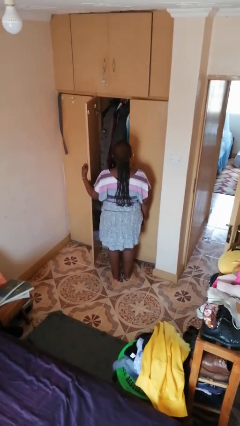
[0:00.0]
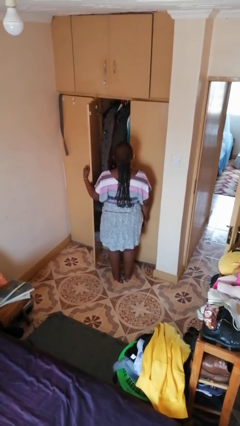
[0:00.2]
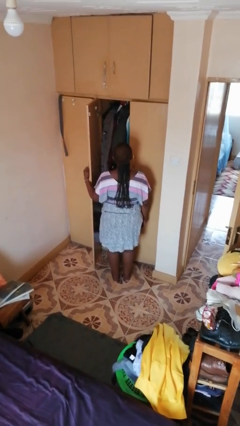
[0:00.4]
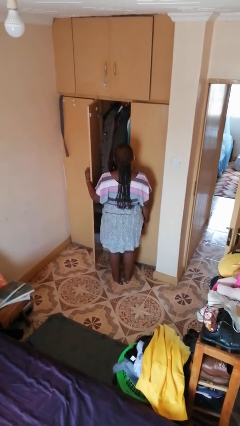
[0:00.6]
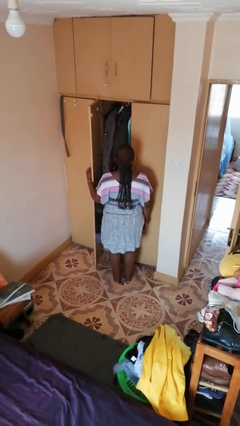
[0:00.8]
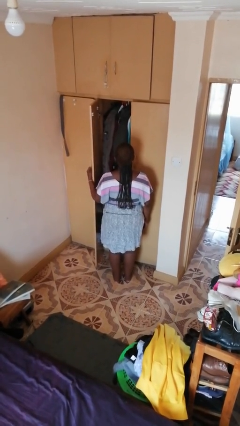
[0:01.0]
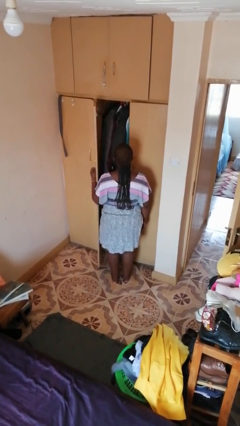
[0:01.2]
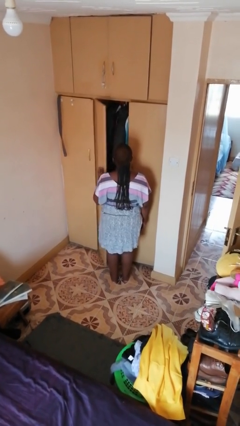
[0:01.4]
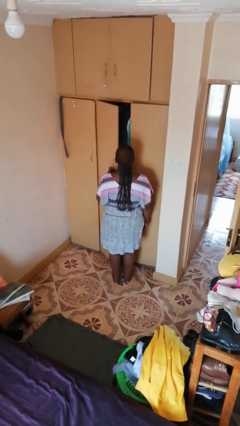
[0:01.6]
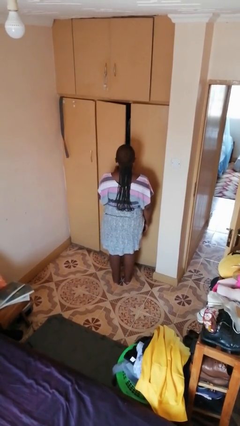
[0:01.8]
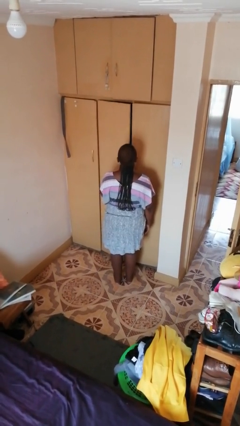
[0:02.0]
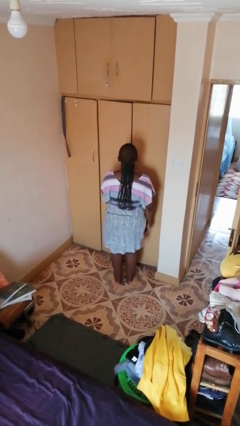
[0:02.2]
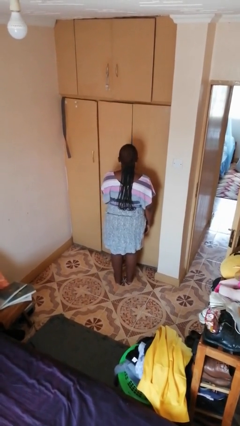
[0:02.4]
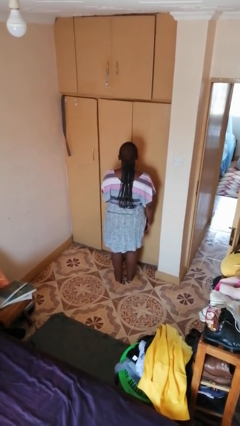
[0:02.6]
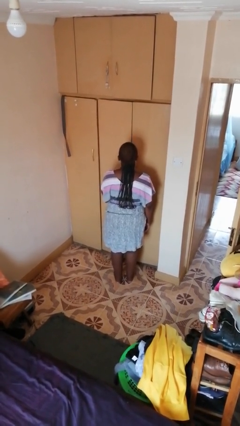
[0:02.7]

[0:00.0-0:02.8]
person closes closet door

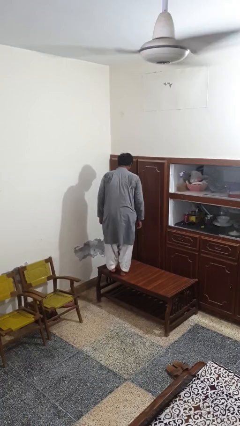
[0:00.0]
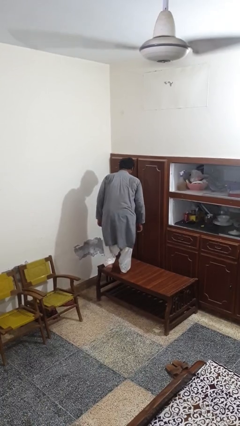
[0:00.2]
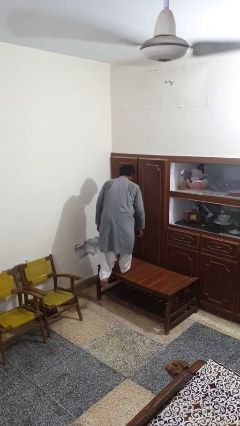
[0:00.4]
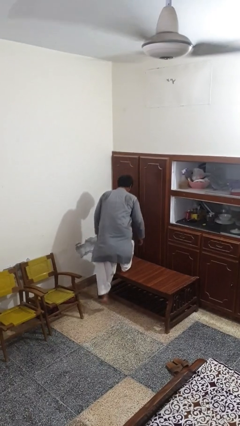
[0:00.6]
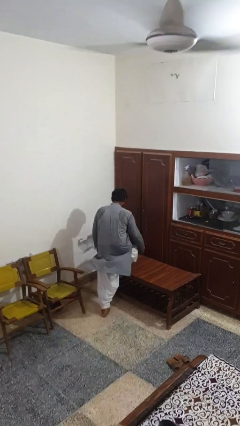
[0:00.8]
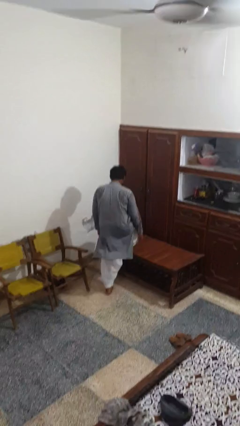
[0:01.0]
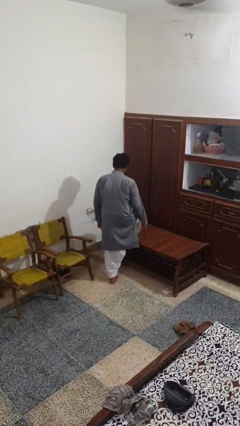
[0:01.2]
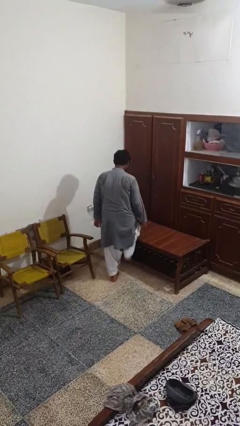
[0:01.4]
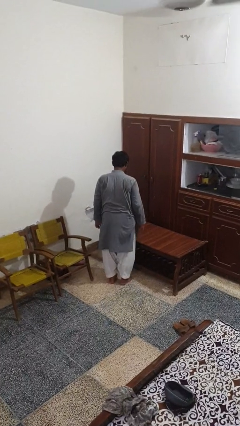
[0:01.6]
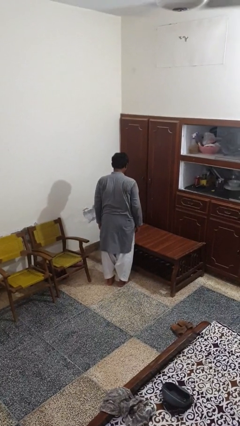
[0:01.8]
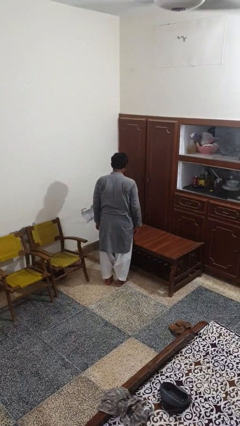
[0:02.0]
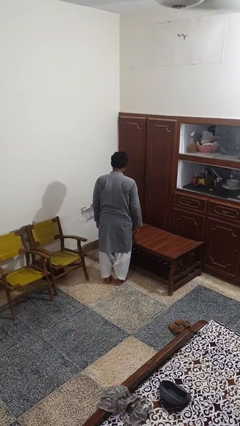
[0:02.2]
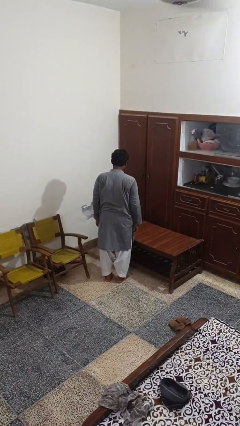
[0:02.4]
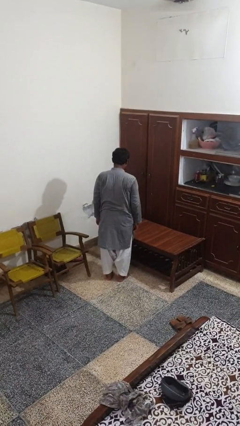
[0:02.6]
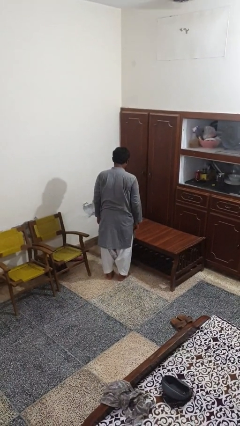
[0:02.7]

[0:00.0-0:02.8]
person climbs off table

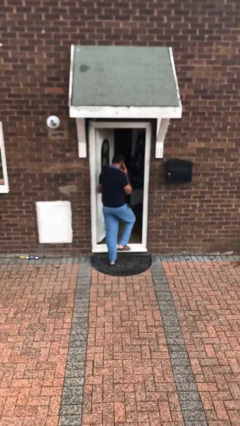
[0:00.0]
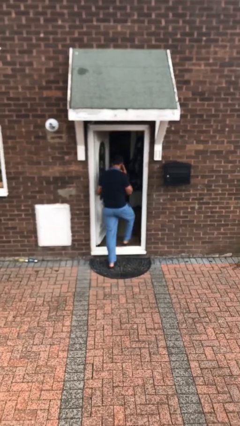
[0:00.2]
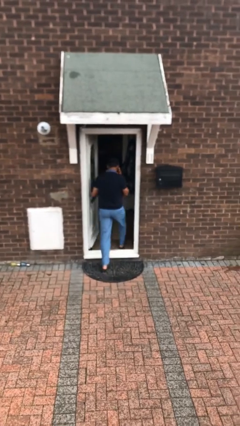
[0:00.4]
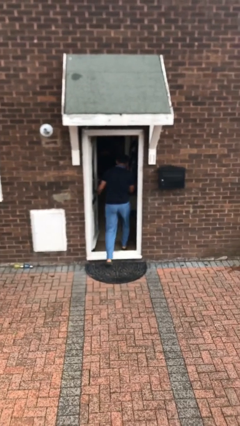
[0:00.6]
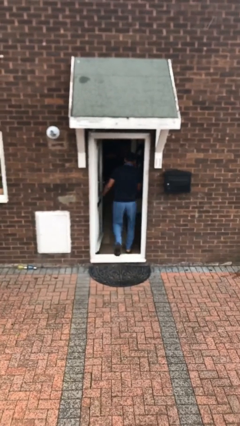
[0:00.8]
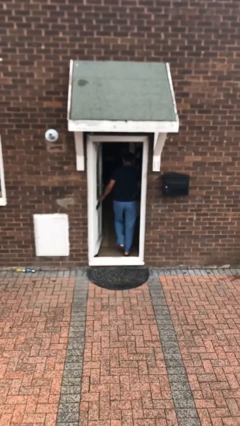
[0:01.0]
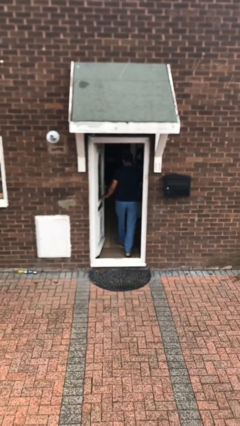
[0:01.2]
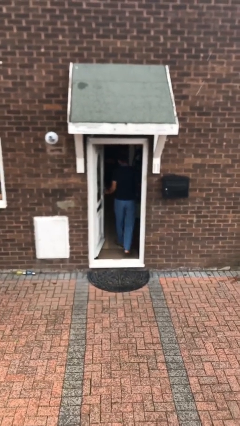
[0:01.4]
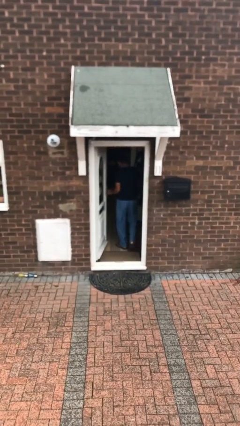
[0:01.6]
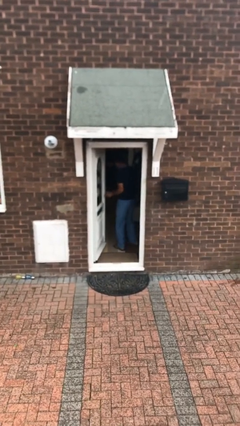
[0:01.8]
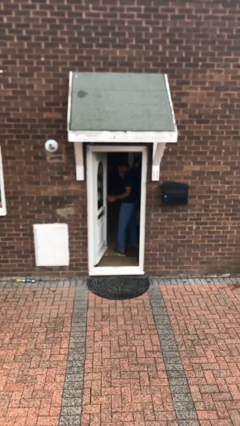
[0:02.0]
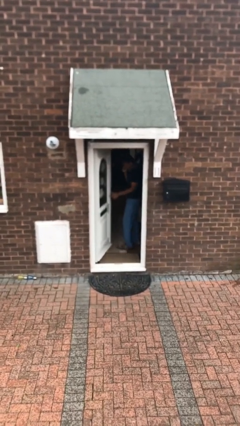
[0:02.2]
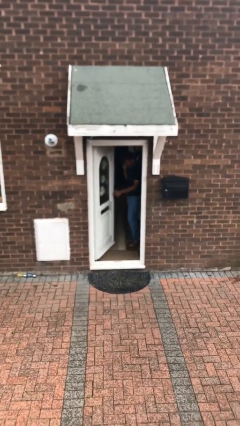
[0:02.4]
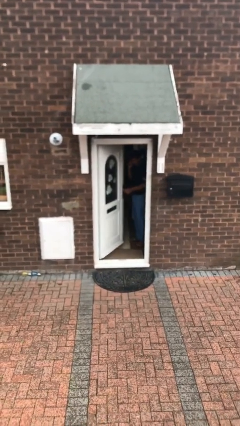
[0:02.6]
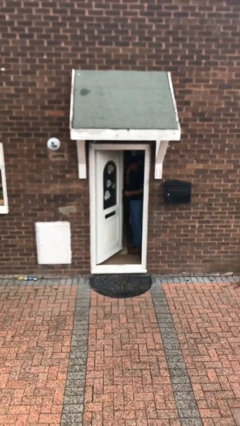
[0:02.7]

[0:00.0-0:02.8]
person exits scene through structure

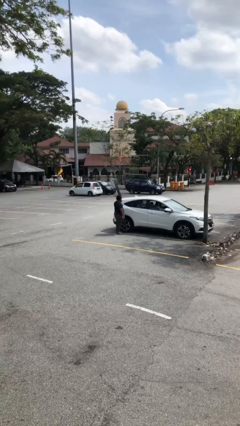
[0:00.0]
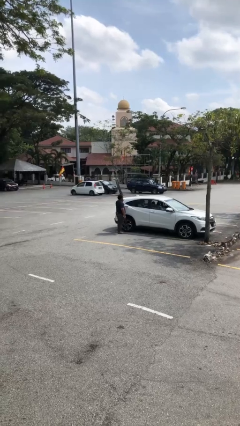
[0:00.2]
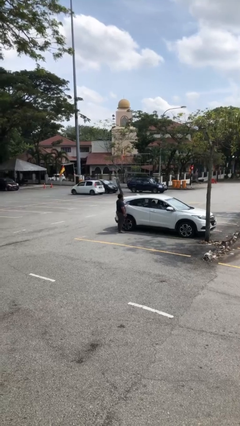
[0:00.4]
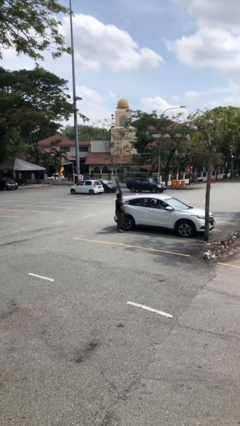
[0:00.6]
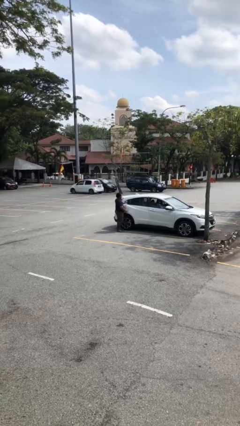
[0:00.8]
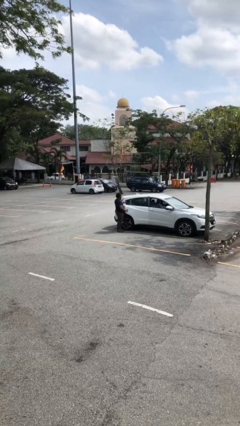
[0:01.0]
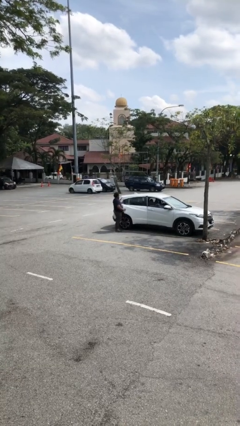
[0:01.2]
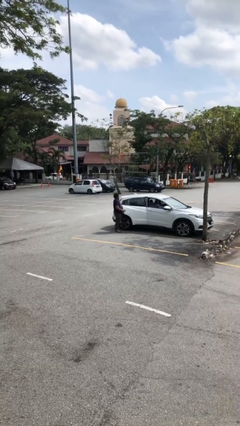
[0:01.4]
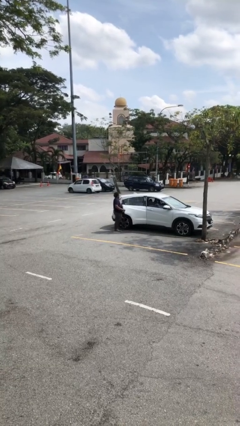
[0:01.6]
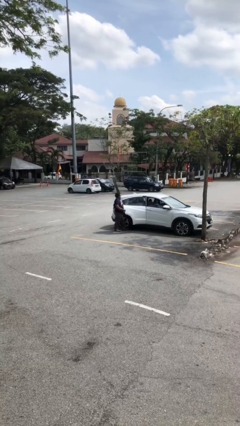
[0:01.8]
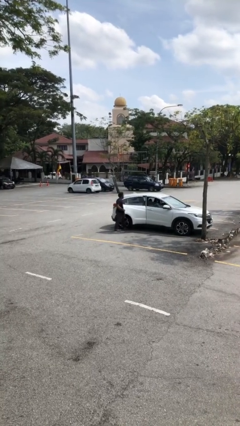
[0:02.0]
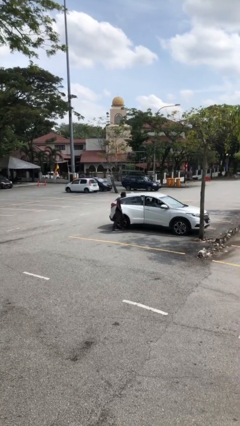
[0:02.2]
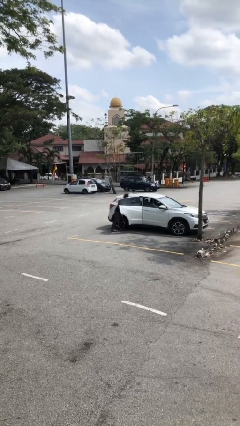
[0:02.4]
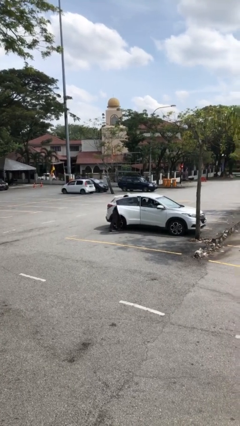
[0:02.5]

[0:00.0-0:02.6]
person opens car door

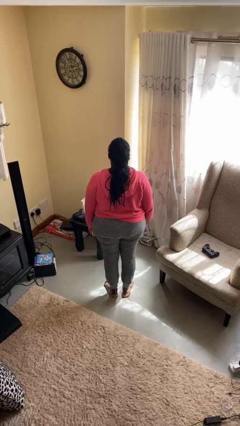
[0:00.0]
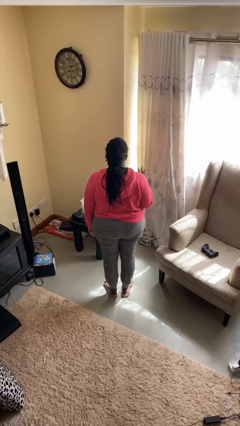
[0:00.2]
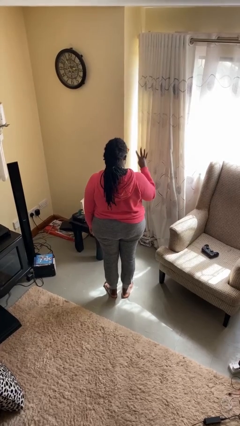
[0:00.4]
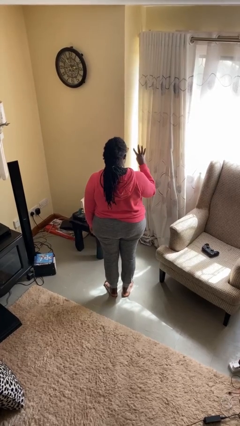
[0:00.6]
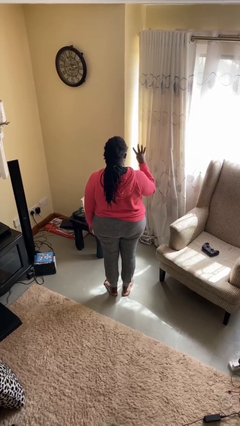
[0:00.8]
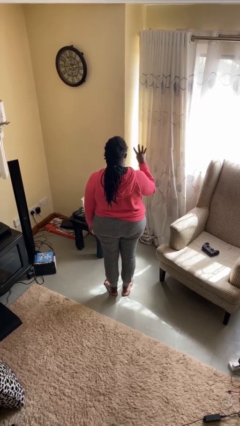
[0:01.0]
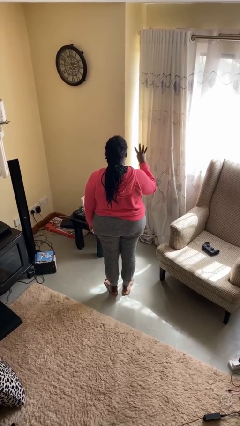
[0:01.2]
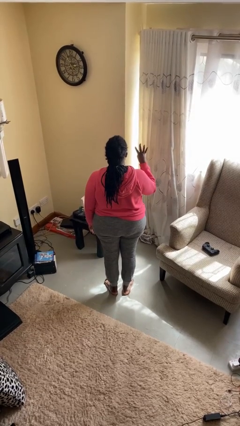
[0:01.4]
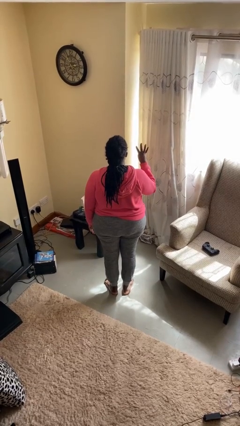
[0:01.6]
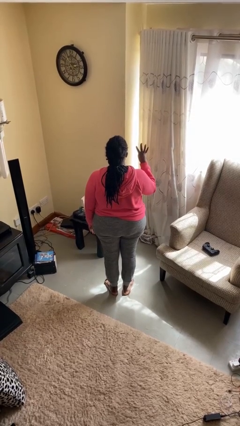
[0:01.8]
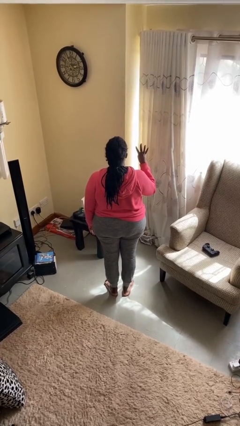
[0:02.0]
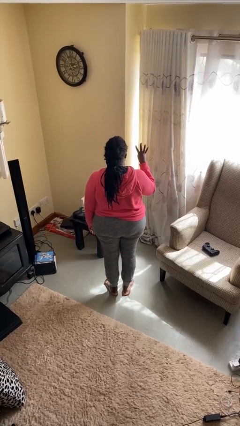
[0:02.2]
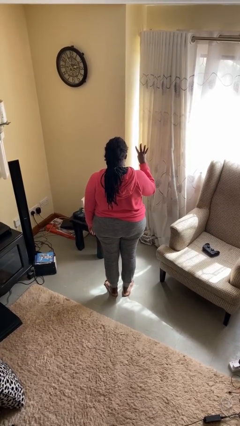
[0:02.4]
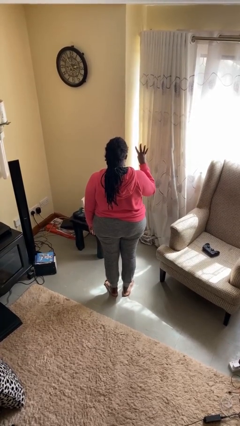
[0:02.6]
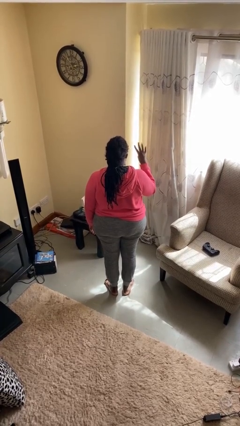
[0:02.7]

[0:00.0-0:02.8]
person gestures number four

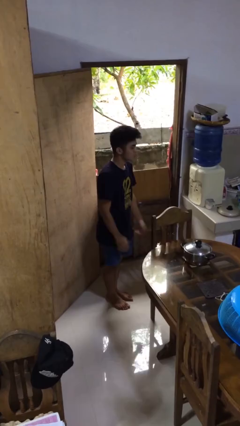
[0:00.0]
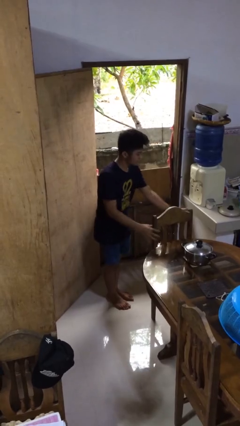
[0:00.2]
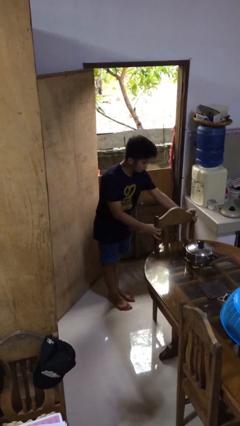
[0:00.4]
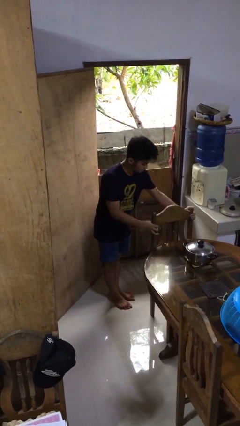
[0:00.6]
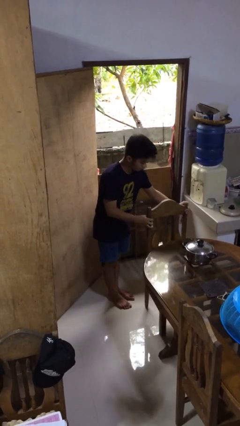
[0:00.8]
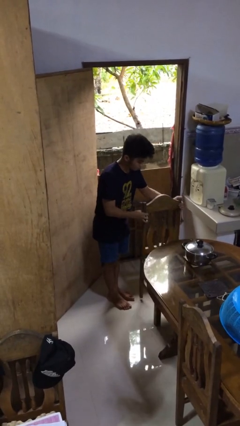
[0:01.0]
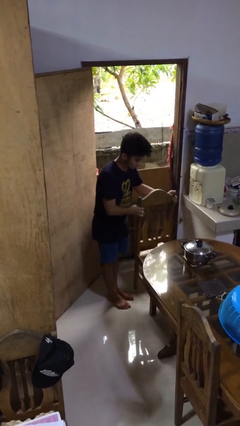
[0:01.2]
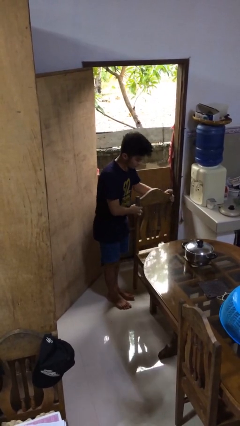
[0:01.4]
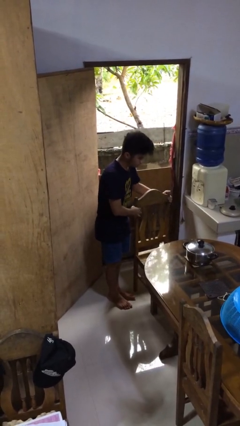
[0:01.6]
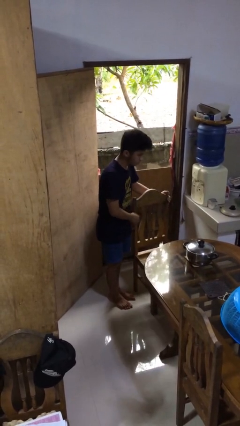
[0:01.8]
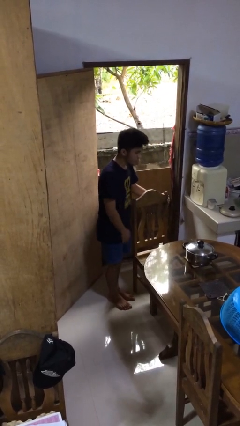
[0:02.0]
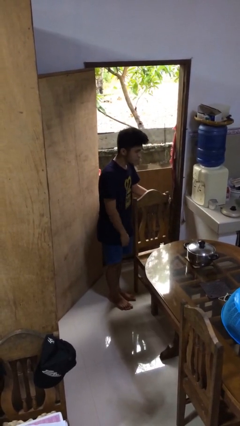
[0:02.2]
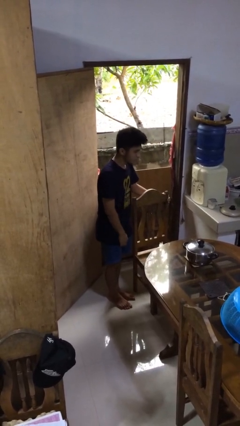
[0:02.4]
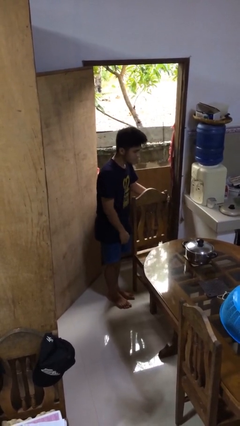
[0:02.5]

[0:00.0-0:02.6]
person pulls out chair

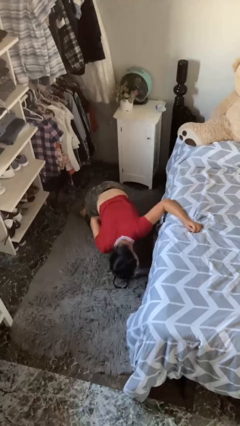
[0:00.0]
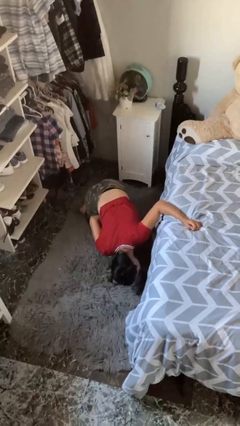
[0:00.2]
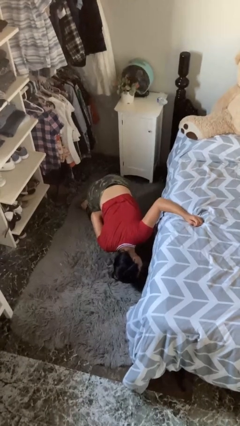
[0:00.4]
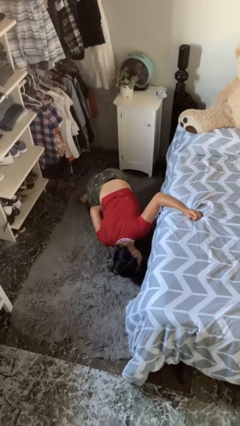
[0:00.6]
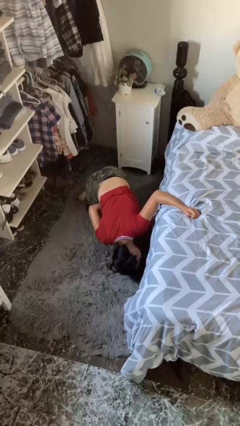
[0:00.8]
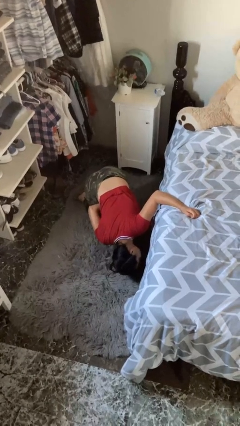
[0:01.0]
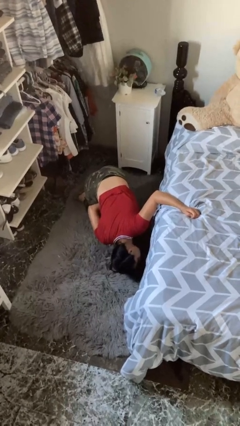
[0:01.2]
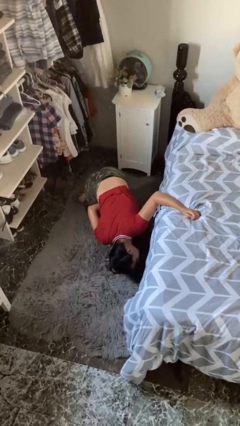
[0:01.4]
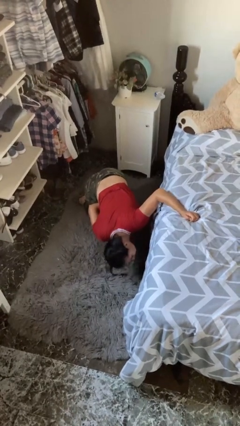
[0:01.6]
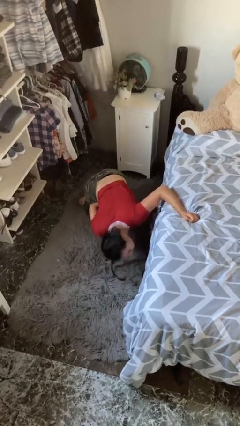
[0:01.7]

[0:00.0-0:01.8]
person searches under bed
